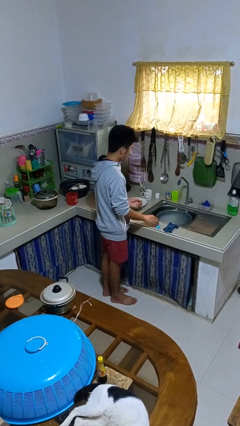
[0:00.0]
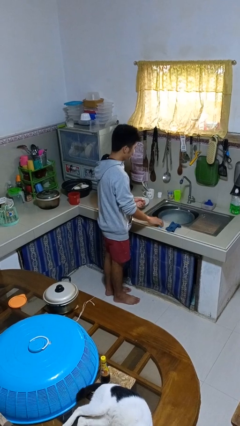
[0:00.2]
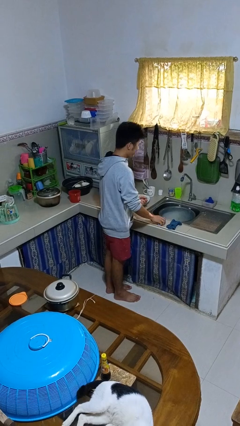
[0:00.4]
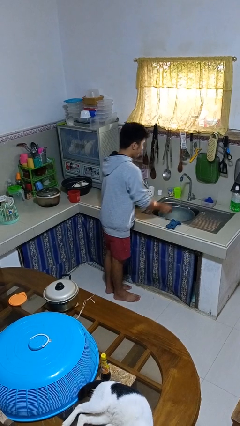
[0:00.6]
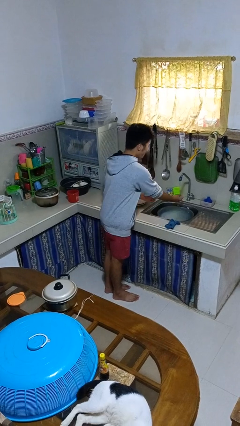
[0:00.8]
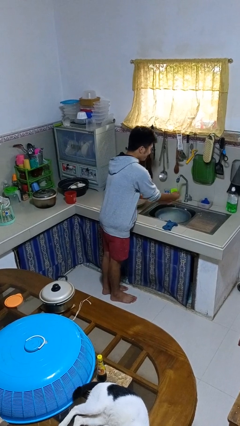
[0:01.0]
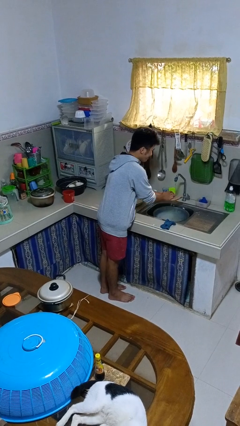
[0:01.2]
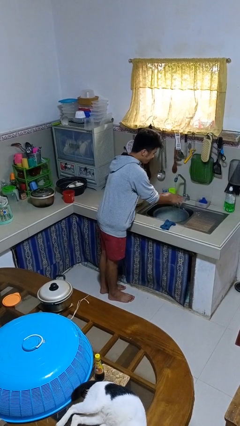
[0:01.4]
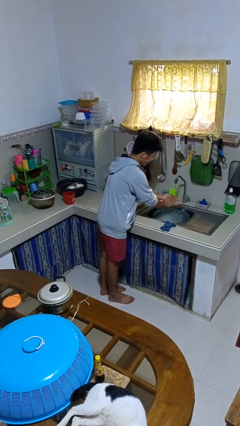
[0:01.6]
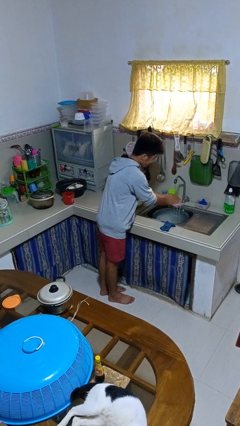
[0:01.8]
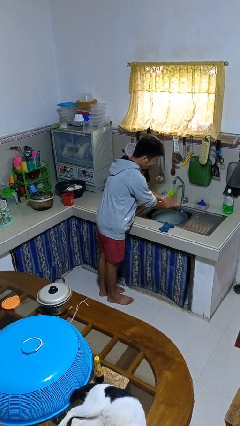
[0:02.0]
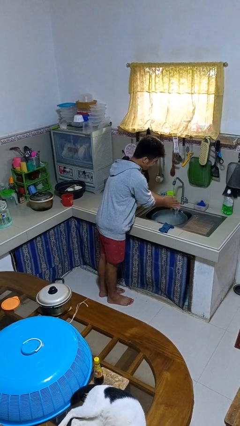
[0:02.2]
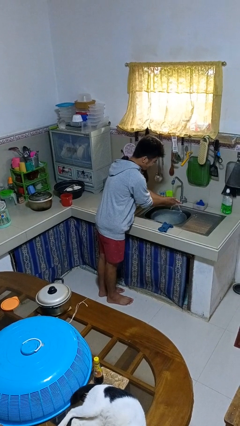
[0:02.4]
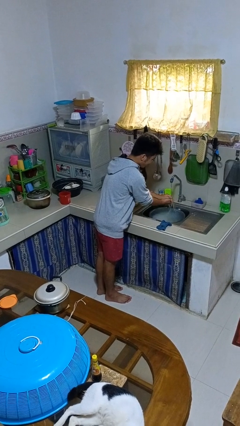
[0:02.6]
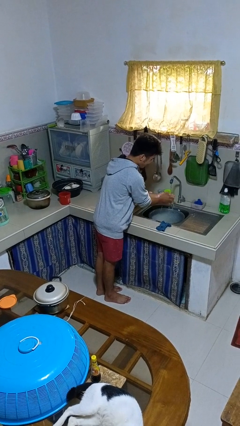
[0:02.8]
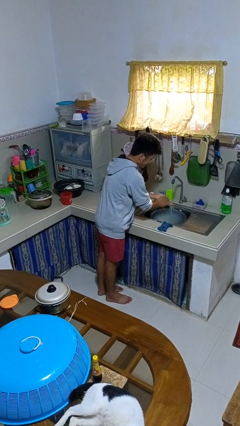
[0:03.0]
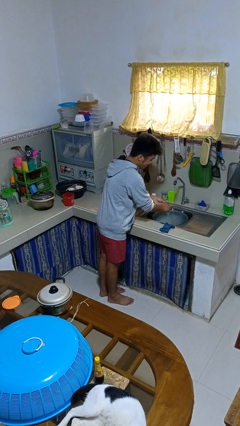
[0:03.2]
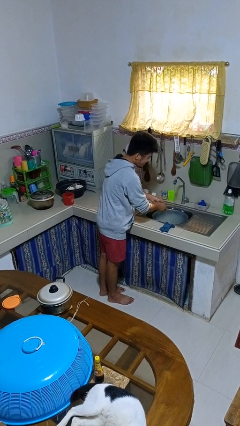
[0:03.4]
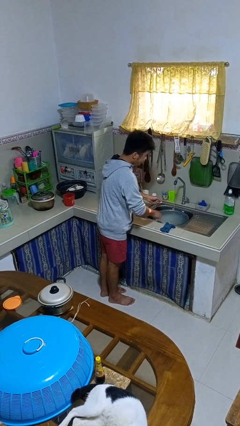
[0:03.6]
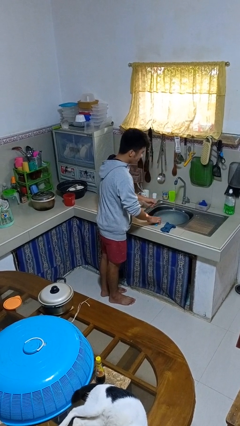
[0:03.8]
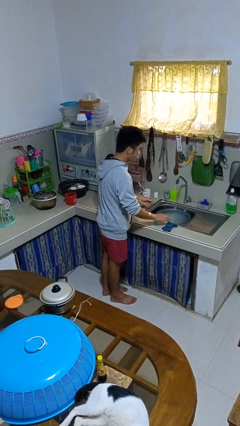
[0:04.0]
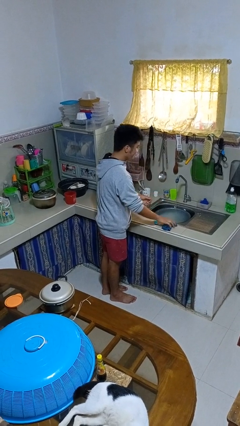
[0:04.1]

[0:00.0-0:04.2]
person washes hands

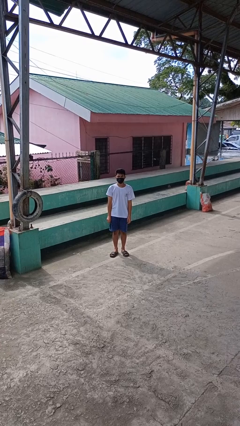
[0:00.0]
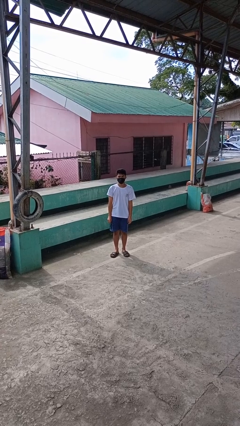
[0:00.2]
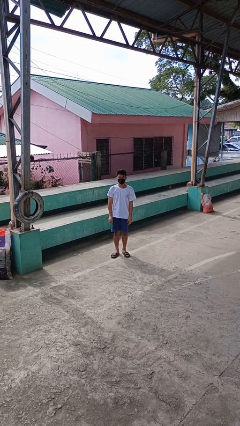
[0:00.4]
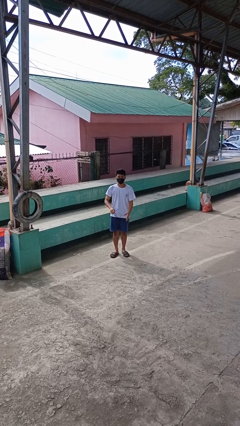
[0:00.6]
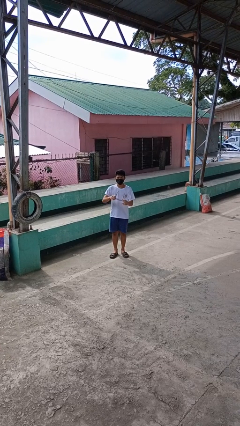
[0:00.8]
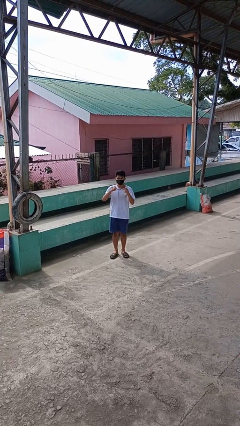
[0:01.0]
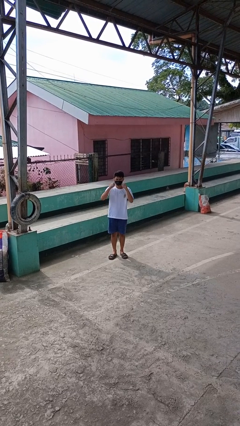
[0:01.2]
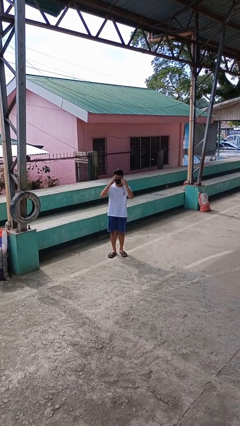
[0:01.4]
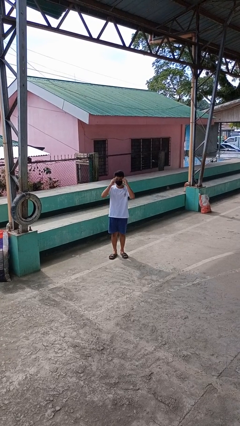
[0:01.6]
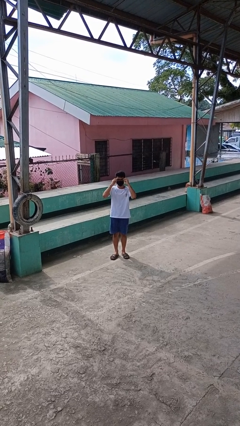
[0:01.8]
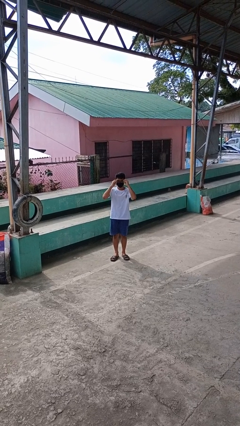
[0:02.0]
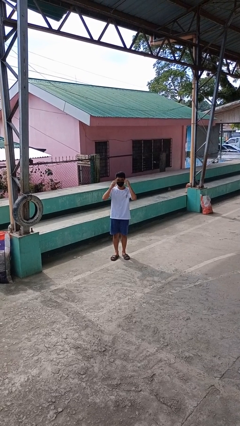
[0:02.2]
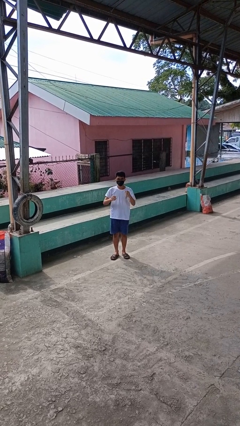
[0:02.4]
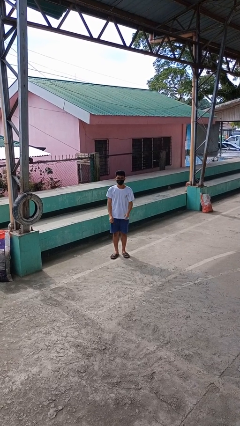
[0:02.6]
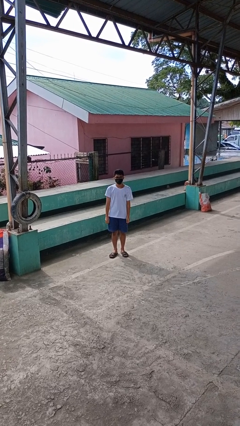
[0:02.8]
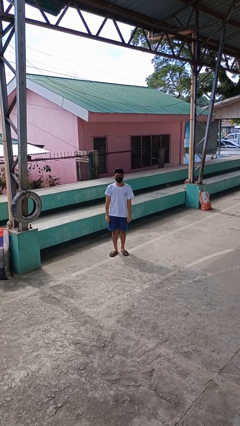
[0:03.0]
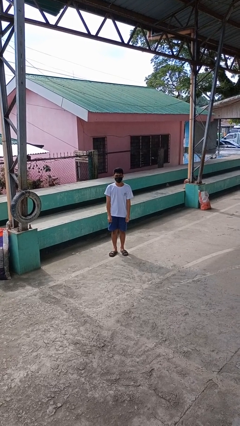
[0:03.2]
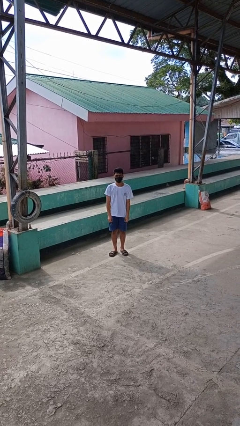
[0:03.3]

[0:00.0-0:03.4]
person puts on glasses

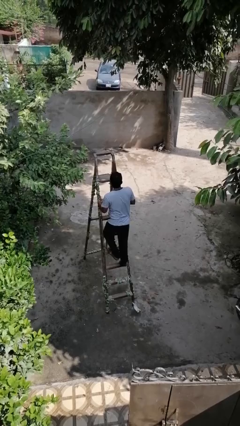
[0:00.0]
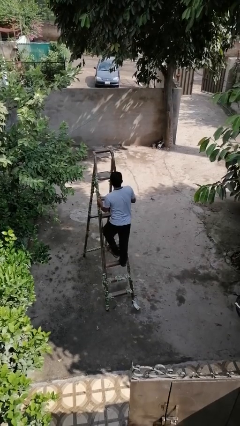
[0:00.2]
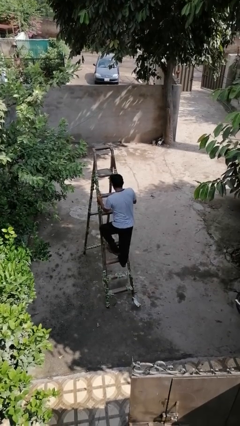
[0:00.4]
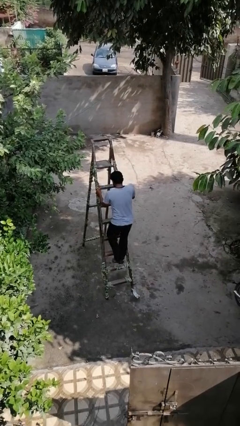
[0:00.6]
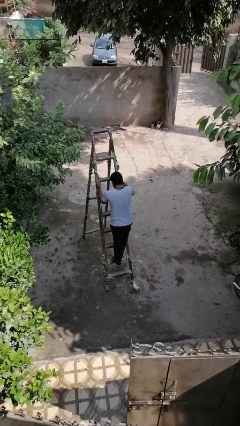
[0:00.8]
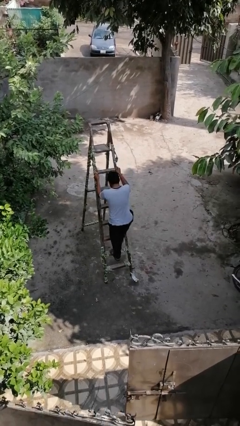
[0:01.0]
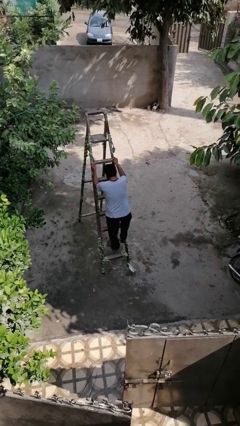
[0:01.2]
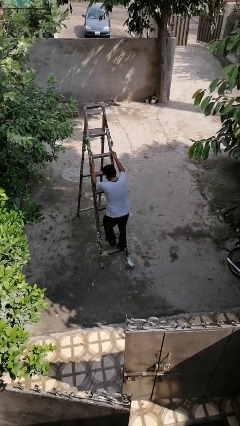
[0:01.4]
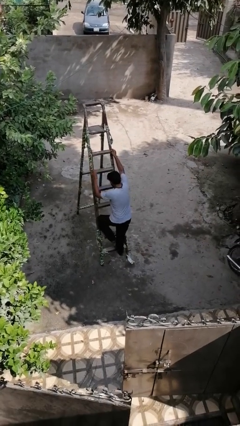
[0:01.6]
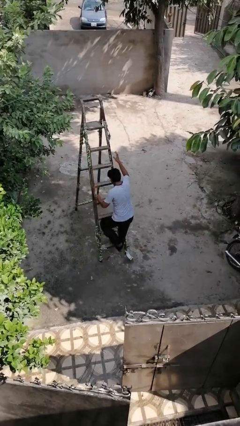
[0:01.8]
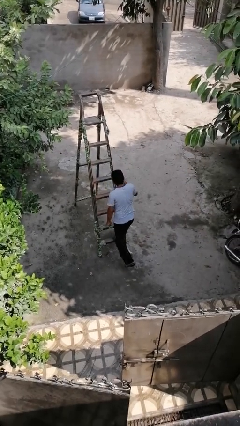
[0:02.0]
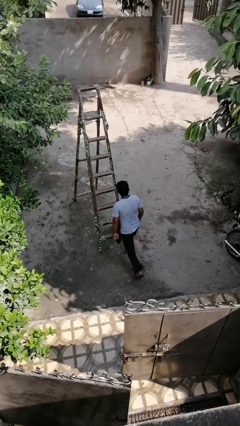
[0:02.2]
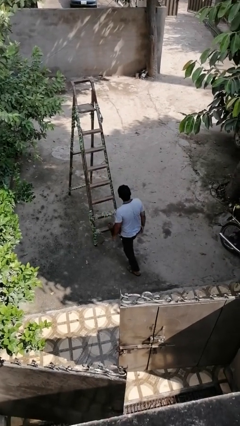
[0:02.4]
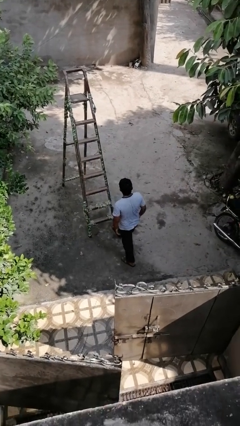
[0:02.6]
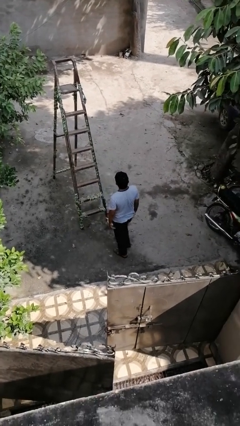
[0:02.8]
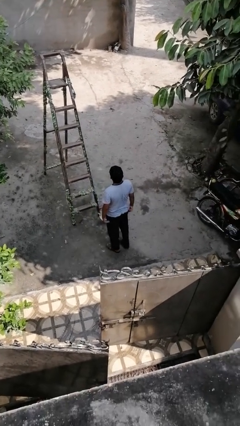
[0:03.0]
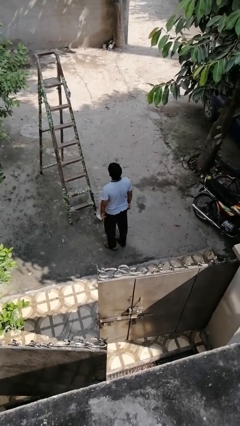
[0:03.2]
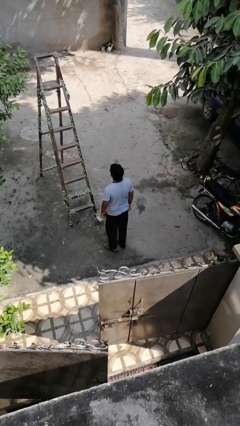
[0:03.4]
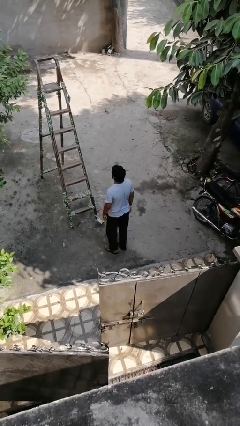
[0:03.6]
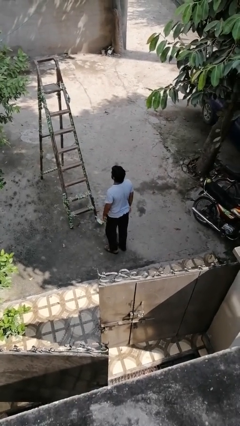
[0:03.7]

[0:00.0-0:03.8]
person climbs down ladder

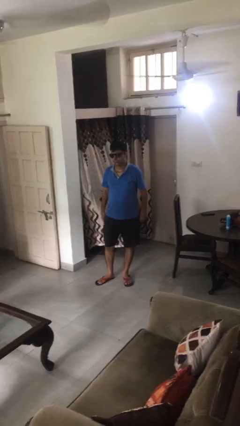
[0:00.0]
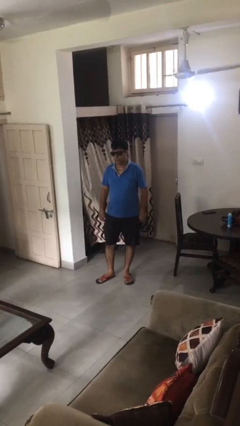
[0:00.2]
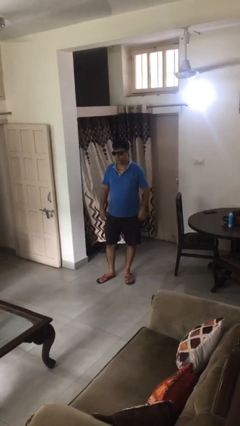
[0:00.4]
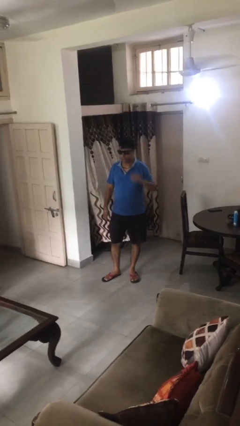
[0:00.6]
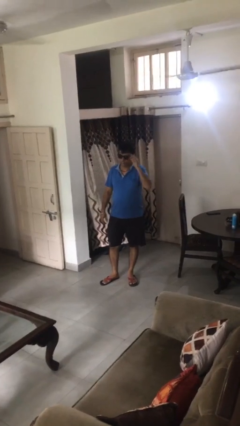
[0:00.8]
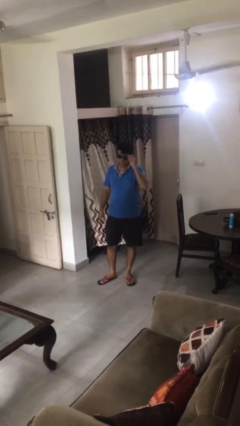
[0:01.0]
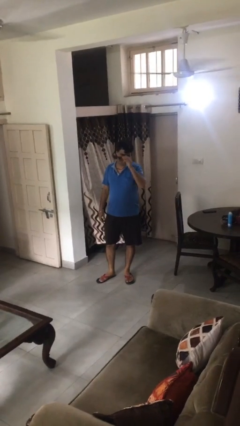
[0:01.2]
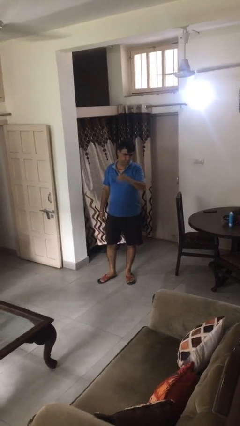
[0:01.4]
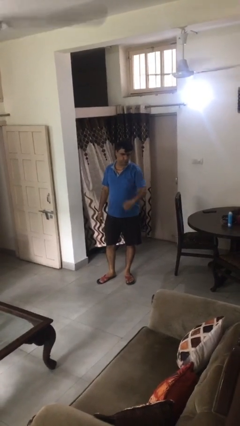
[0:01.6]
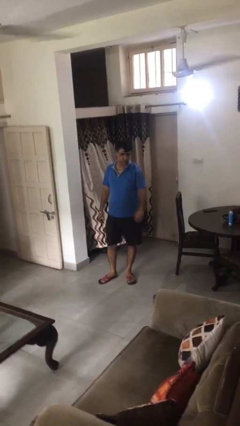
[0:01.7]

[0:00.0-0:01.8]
person takes off sunglasses

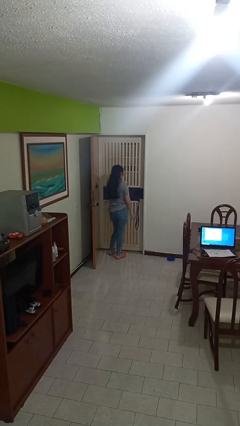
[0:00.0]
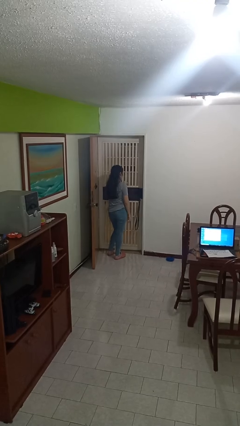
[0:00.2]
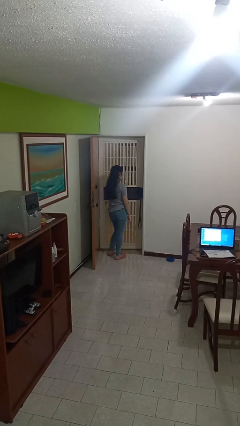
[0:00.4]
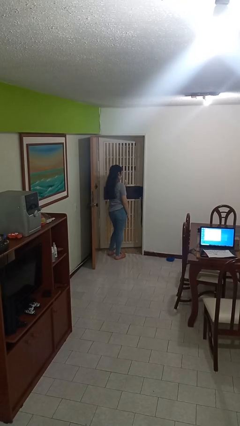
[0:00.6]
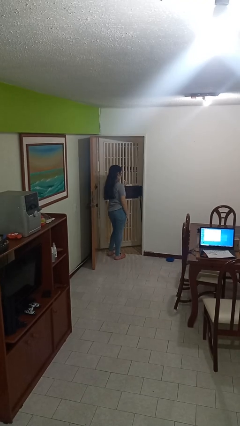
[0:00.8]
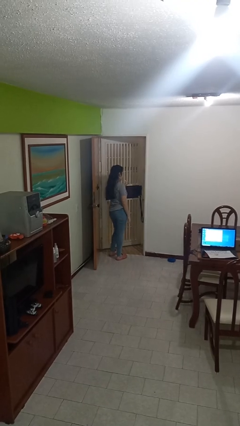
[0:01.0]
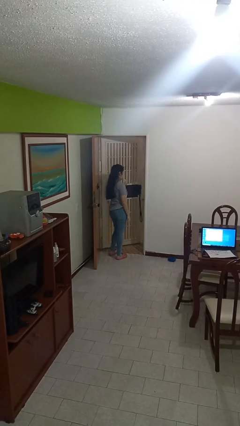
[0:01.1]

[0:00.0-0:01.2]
person opens facility door

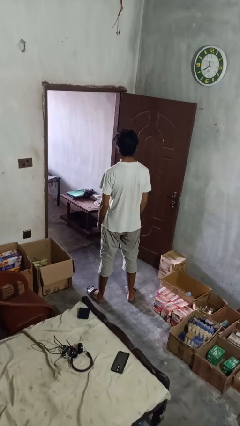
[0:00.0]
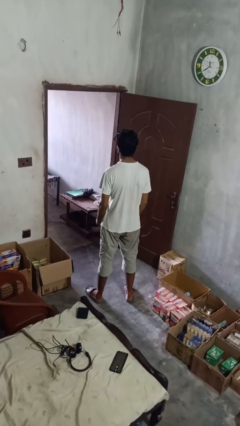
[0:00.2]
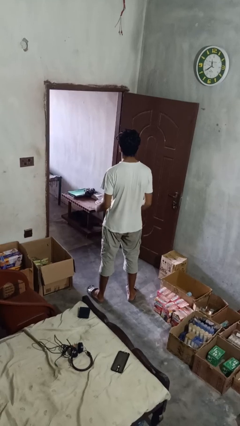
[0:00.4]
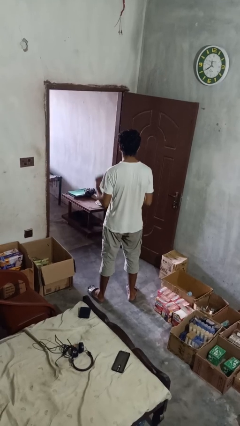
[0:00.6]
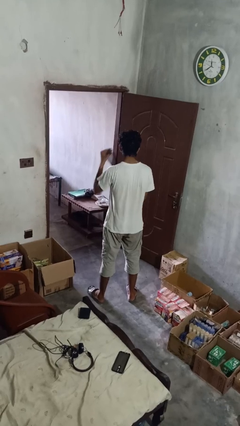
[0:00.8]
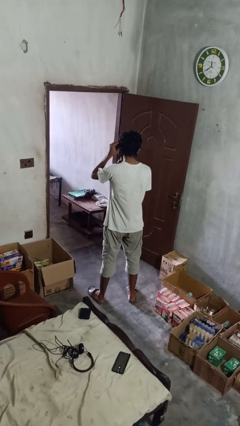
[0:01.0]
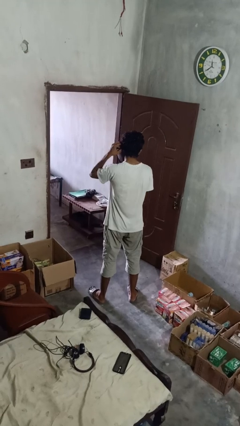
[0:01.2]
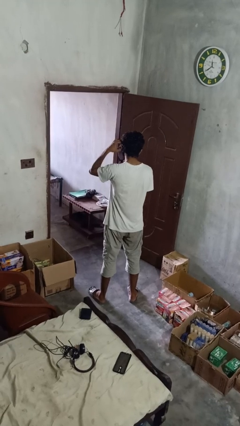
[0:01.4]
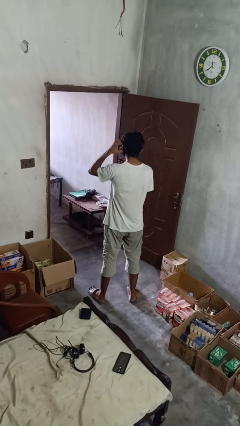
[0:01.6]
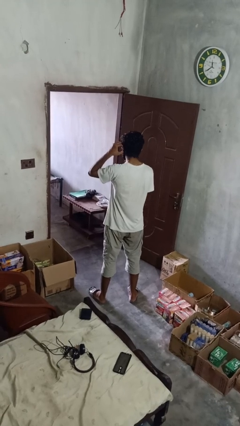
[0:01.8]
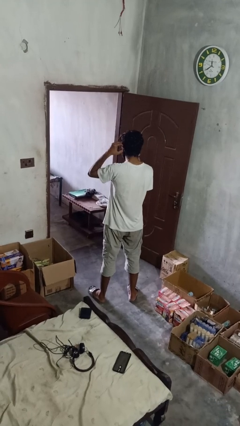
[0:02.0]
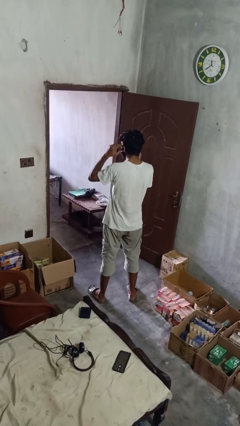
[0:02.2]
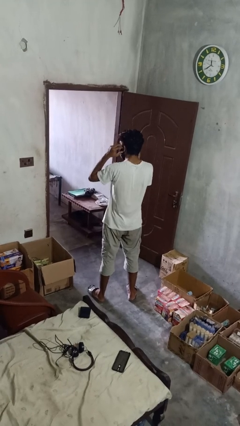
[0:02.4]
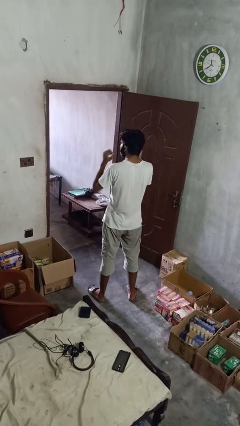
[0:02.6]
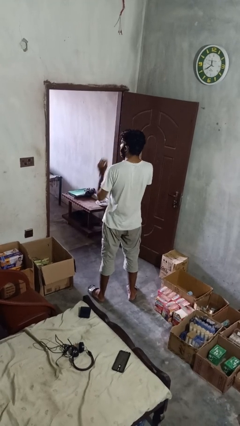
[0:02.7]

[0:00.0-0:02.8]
person puts on facemask
